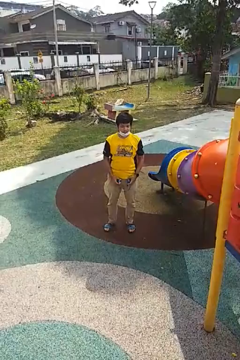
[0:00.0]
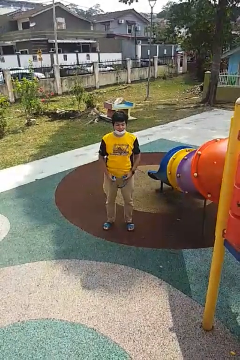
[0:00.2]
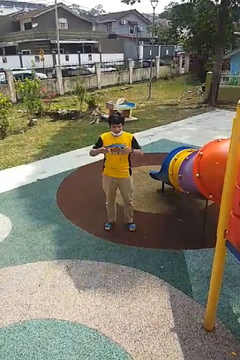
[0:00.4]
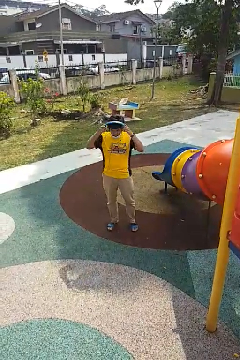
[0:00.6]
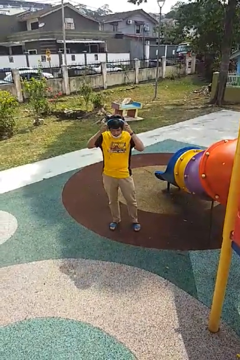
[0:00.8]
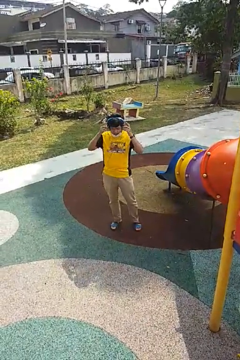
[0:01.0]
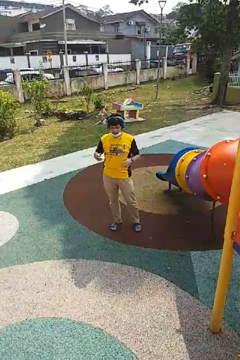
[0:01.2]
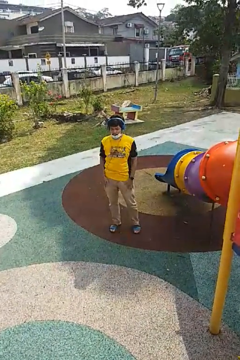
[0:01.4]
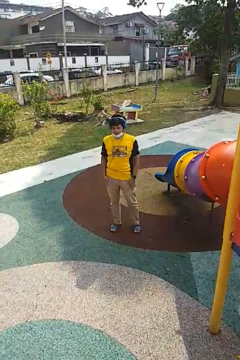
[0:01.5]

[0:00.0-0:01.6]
person puts on headphones

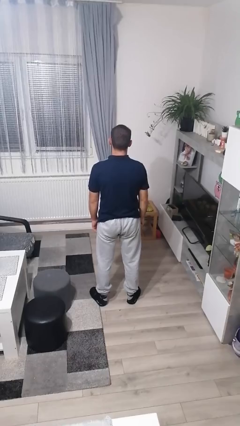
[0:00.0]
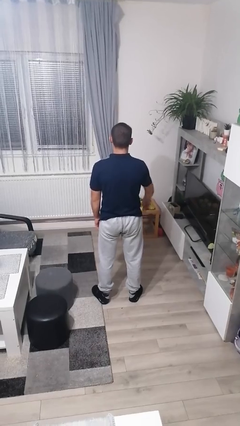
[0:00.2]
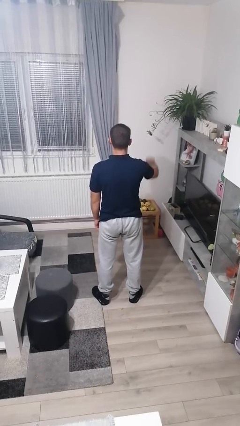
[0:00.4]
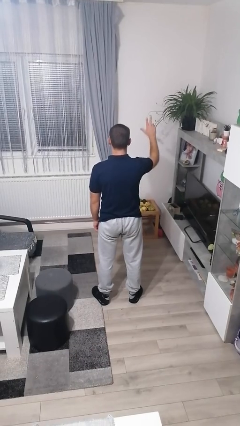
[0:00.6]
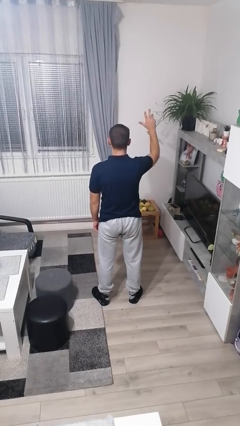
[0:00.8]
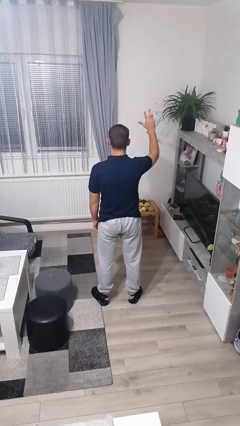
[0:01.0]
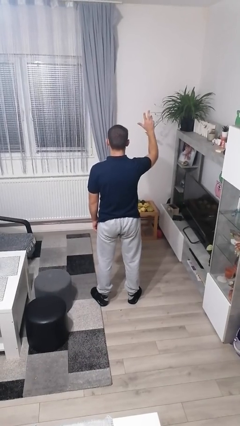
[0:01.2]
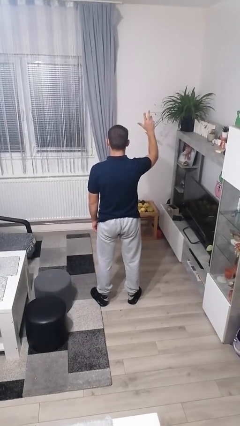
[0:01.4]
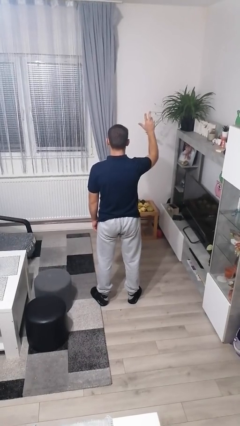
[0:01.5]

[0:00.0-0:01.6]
person gestures number three

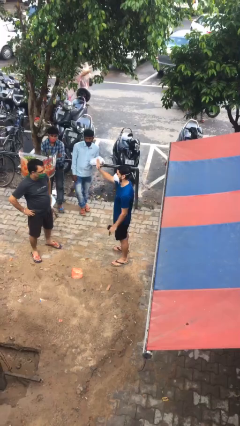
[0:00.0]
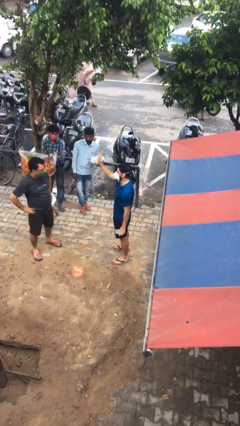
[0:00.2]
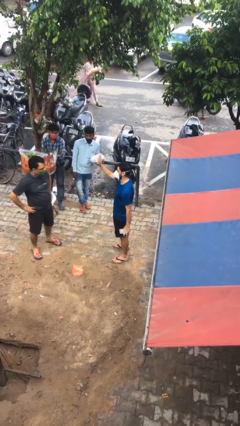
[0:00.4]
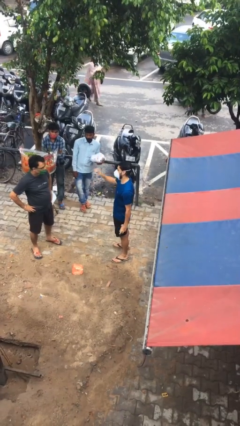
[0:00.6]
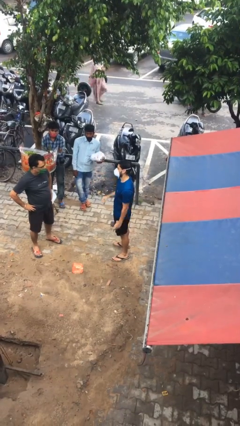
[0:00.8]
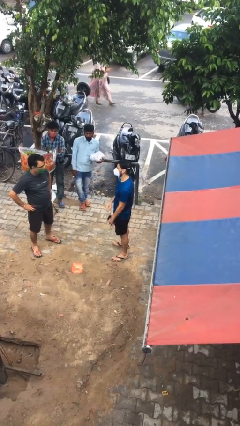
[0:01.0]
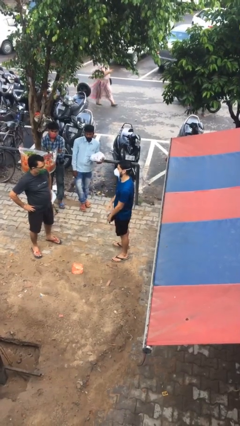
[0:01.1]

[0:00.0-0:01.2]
person waves at person

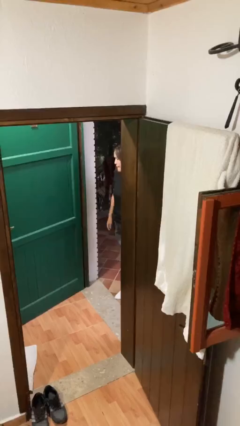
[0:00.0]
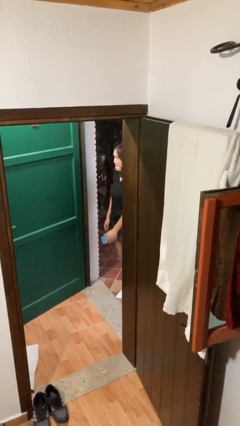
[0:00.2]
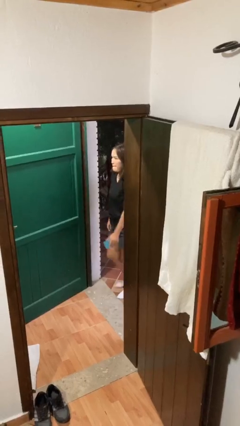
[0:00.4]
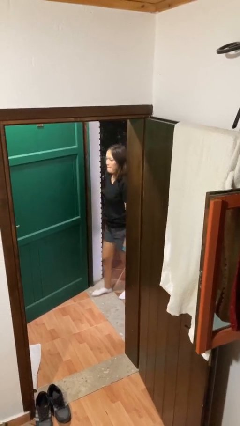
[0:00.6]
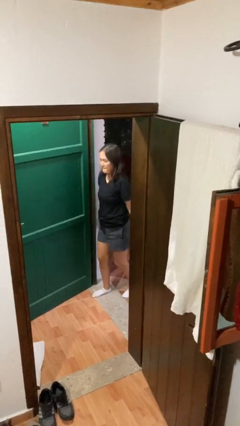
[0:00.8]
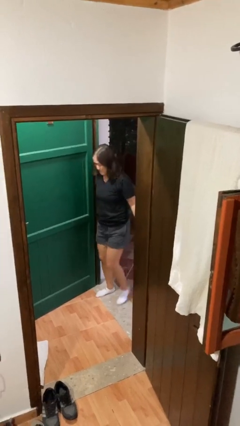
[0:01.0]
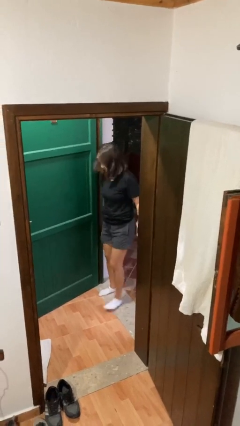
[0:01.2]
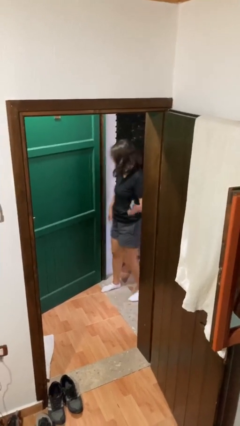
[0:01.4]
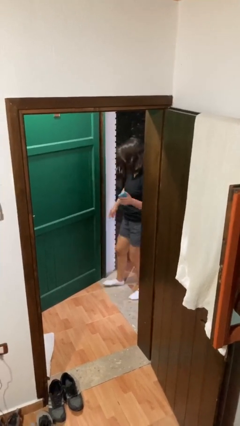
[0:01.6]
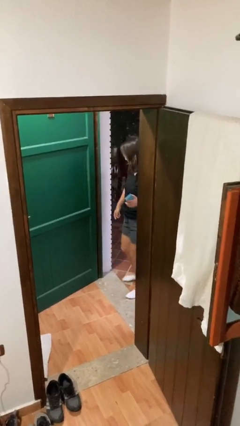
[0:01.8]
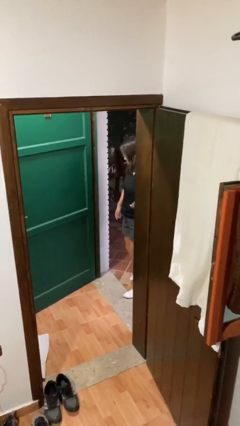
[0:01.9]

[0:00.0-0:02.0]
person bumps into wall

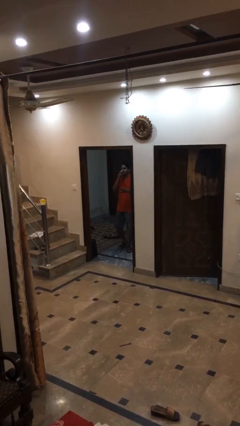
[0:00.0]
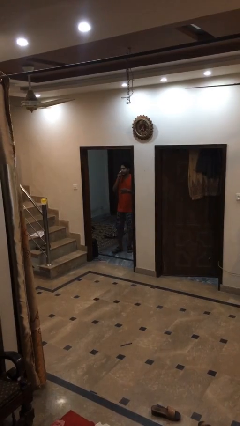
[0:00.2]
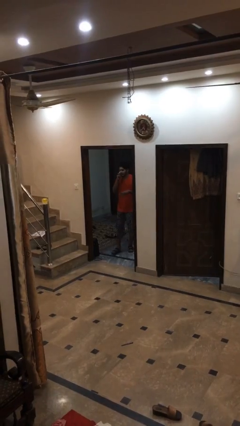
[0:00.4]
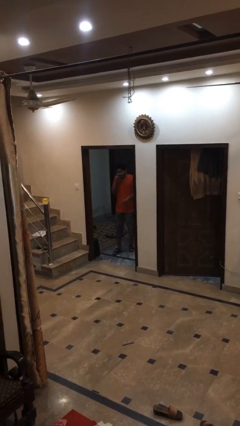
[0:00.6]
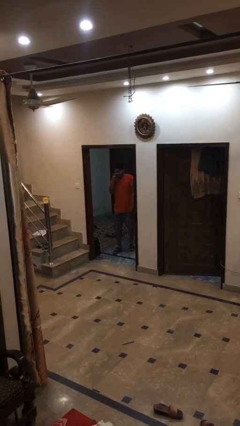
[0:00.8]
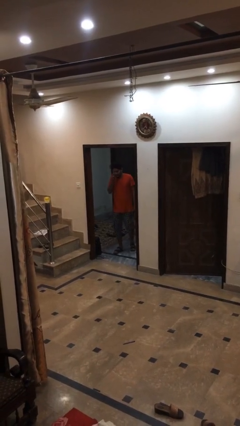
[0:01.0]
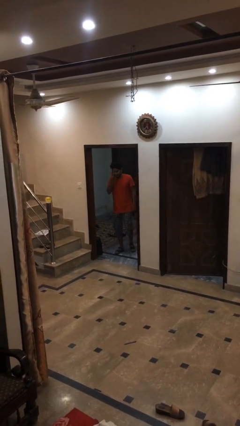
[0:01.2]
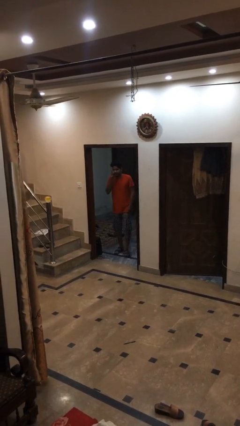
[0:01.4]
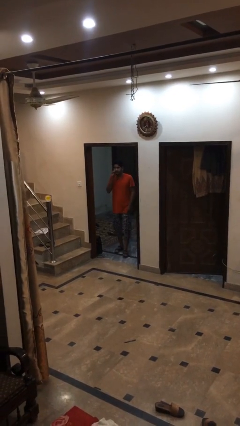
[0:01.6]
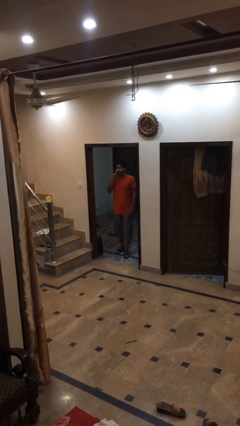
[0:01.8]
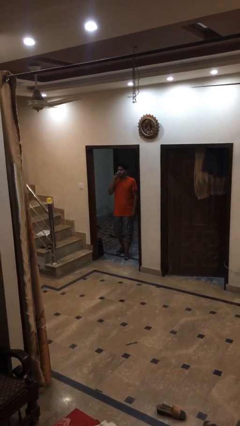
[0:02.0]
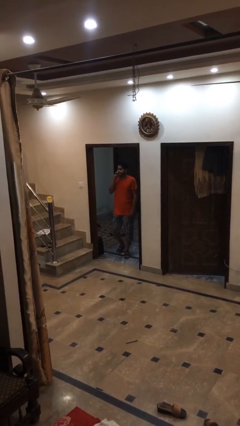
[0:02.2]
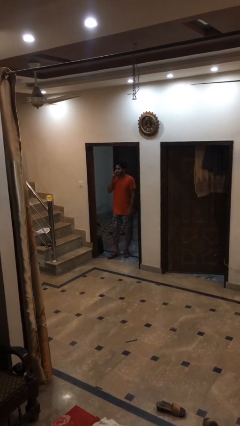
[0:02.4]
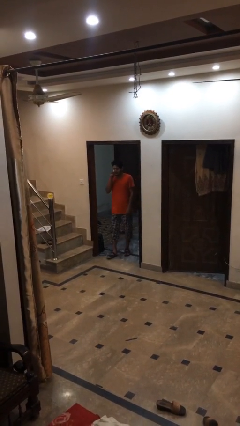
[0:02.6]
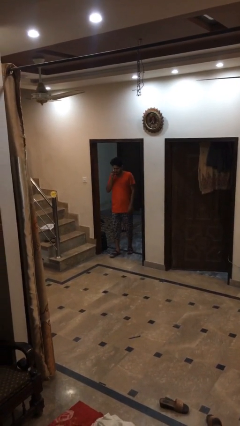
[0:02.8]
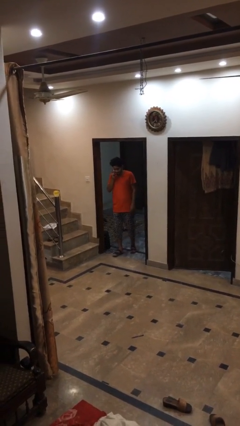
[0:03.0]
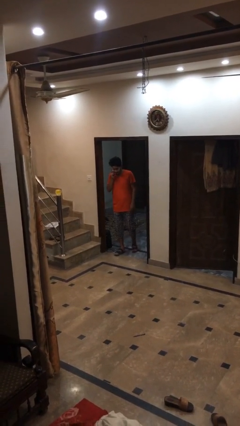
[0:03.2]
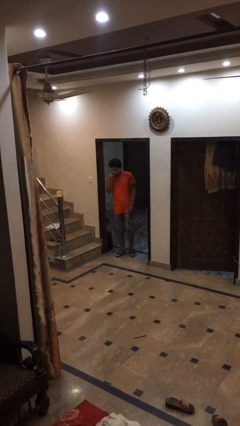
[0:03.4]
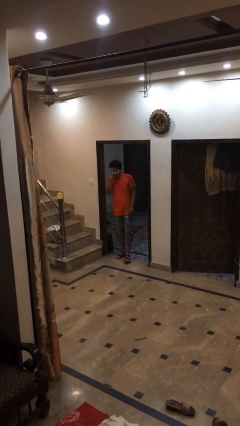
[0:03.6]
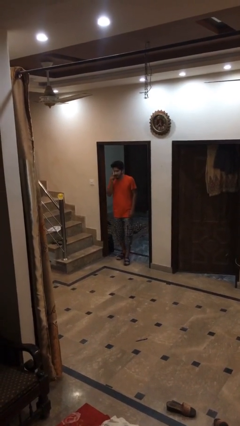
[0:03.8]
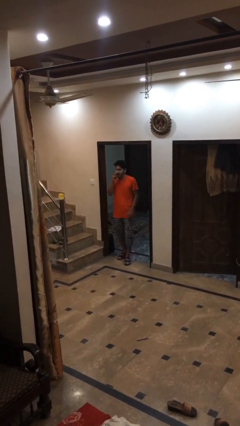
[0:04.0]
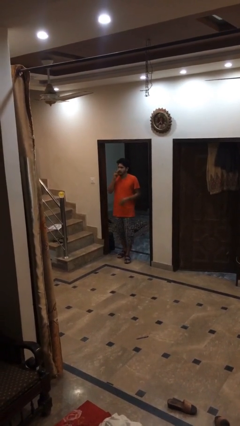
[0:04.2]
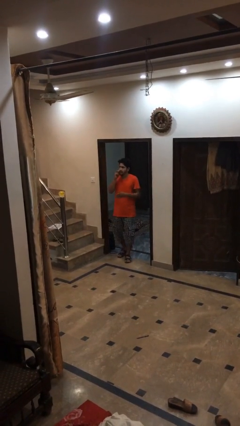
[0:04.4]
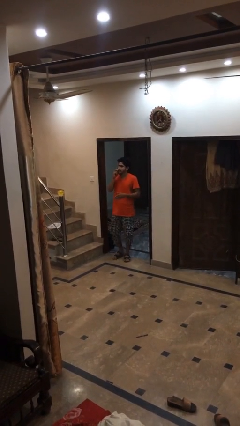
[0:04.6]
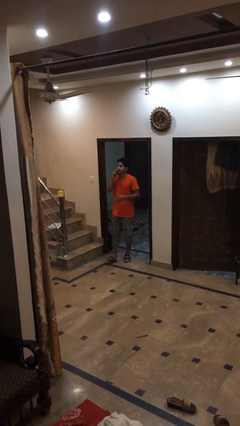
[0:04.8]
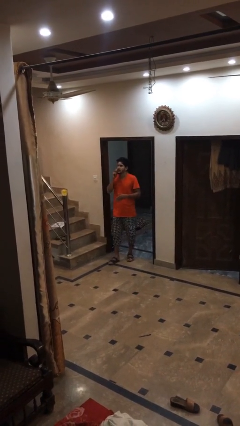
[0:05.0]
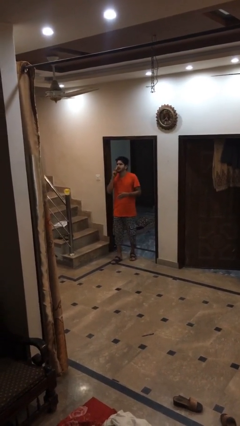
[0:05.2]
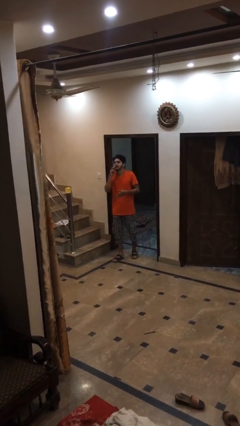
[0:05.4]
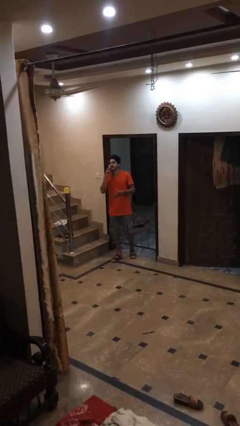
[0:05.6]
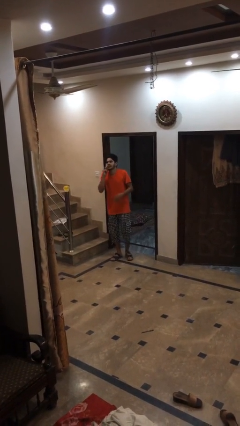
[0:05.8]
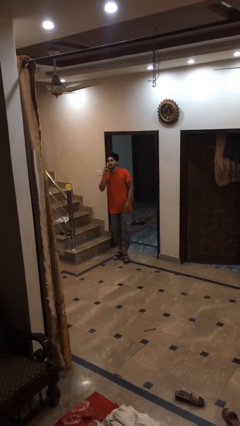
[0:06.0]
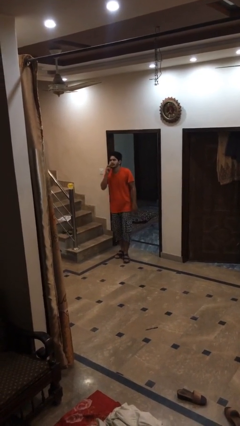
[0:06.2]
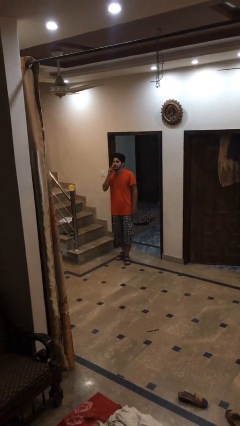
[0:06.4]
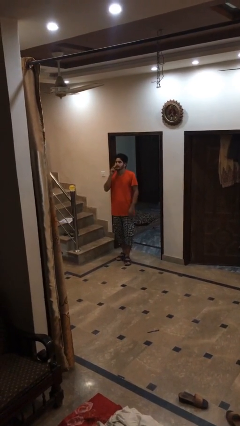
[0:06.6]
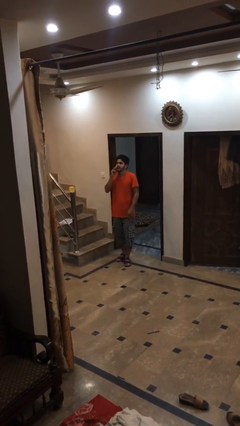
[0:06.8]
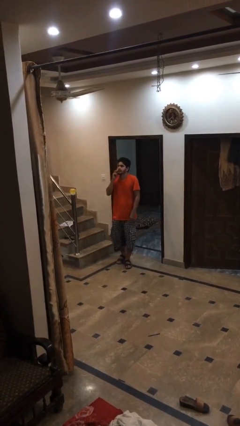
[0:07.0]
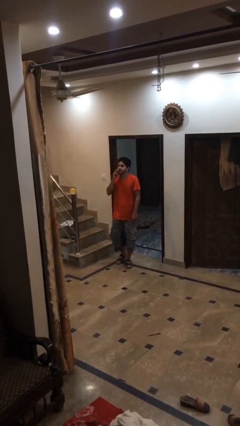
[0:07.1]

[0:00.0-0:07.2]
person enters scene through structure

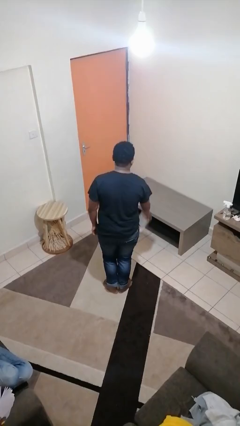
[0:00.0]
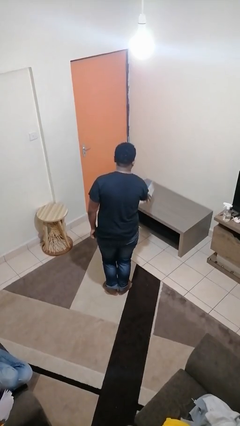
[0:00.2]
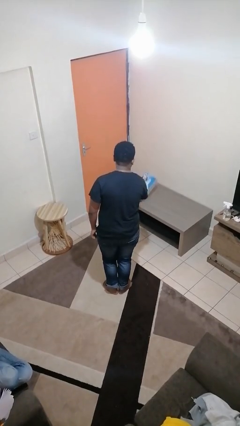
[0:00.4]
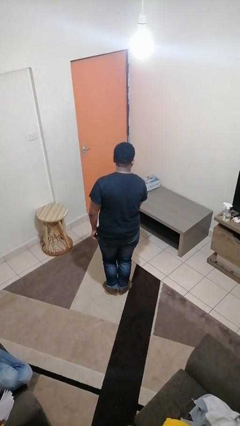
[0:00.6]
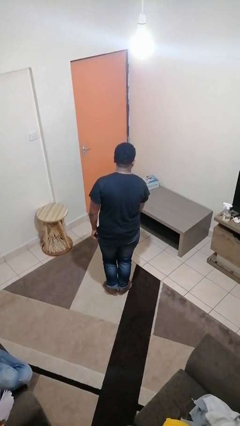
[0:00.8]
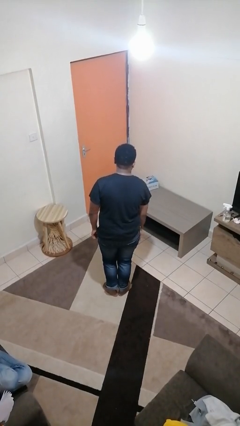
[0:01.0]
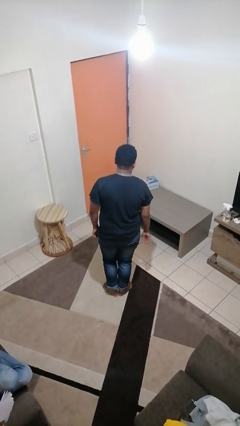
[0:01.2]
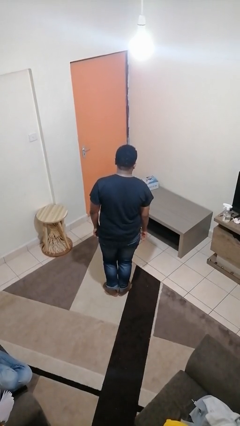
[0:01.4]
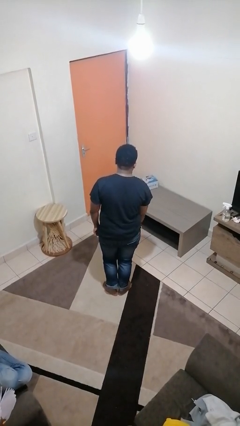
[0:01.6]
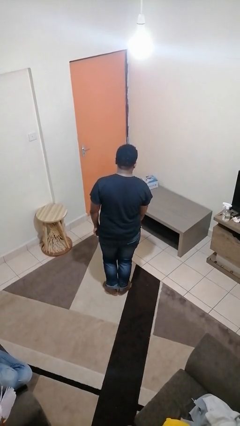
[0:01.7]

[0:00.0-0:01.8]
person throws object on table

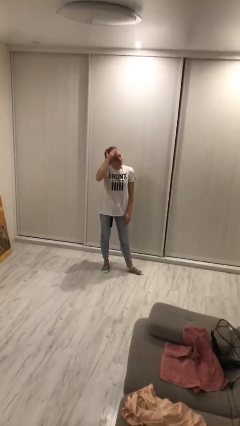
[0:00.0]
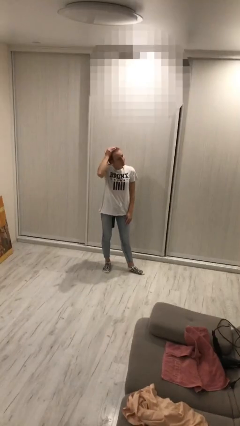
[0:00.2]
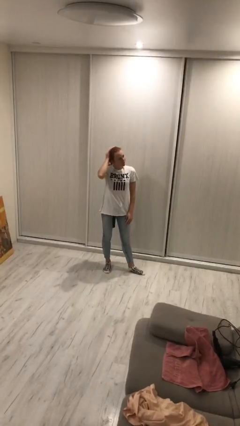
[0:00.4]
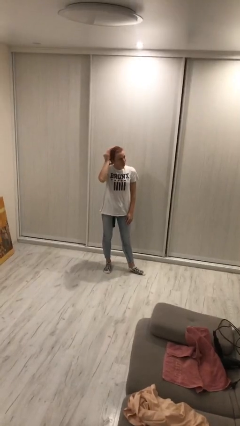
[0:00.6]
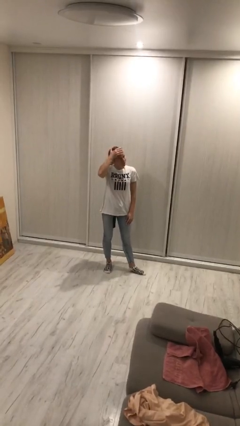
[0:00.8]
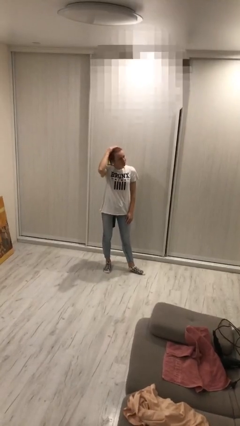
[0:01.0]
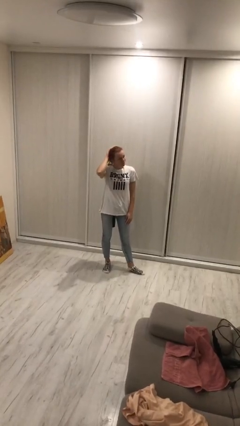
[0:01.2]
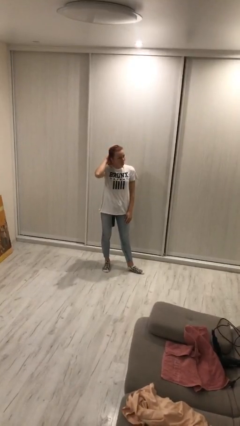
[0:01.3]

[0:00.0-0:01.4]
person pats head

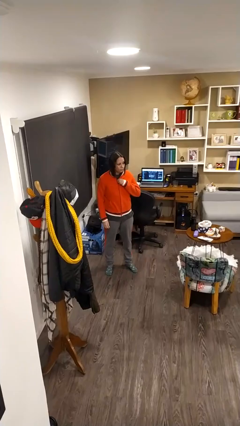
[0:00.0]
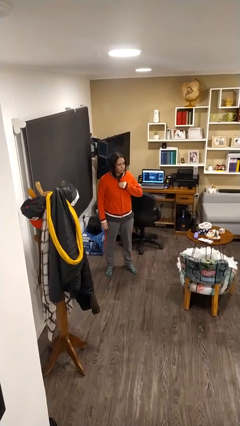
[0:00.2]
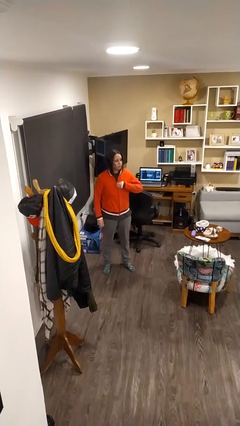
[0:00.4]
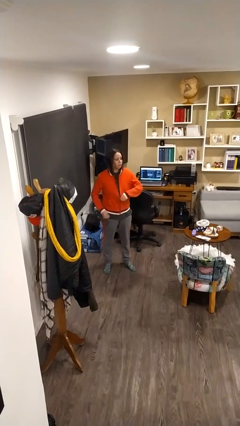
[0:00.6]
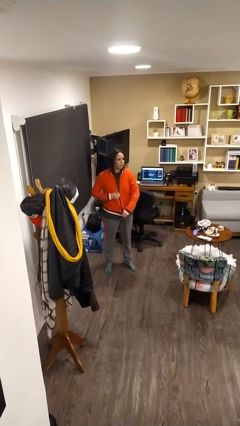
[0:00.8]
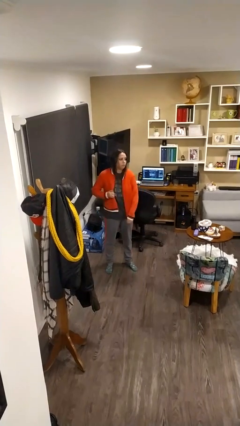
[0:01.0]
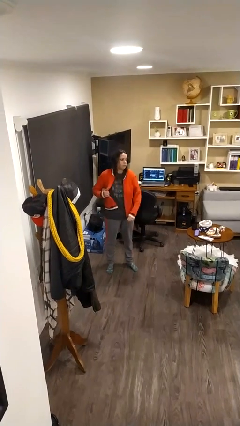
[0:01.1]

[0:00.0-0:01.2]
person unzips jacket
